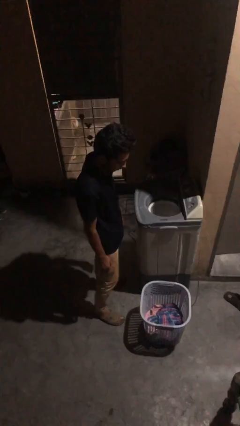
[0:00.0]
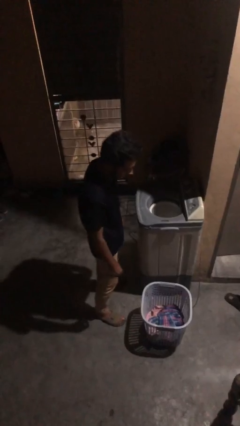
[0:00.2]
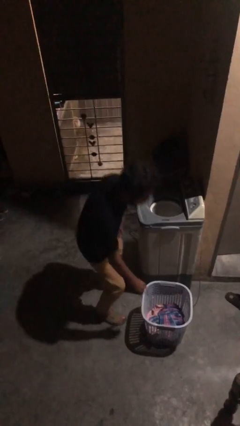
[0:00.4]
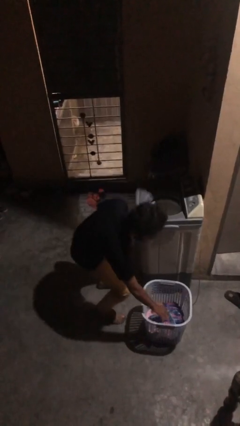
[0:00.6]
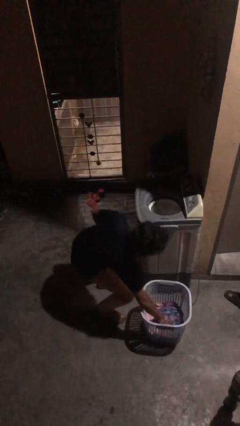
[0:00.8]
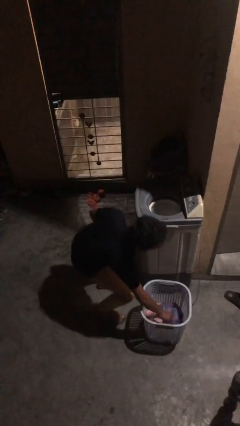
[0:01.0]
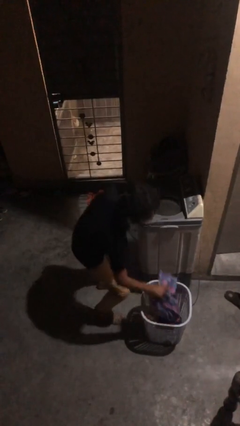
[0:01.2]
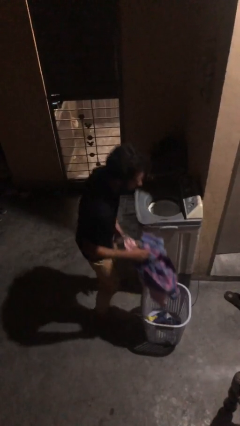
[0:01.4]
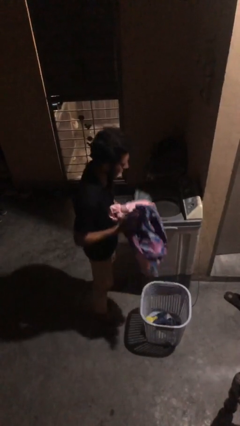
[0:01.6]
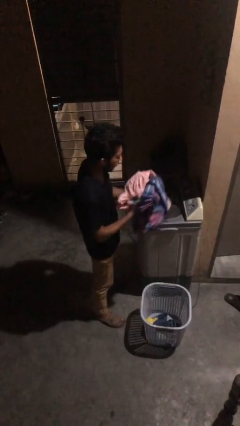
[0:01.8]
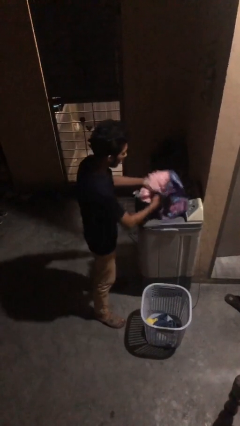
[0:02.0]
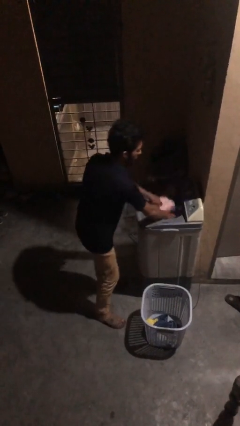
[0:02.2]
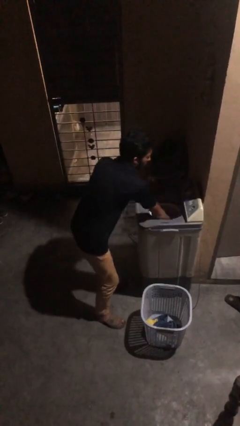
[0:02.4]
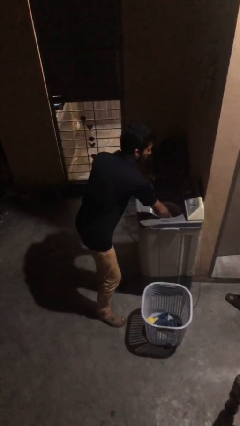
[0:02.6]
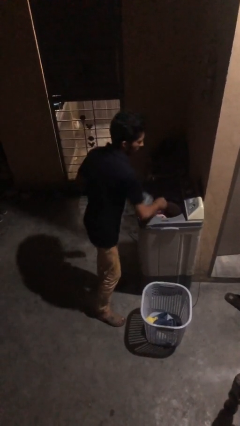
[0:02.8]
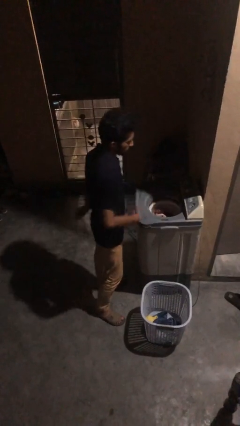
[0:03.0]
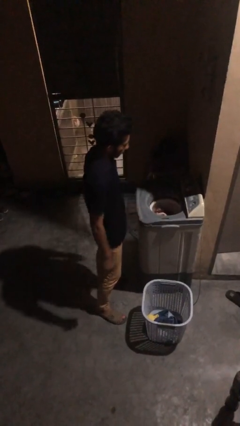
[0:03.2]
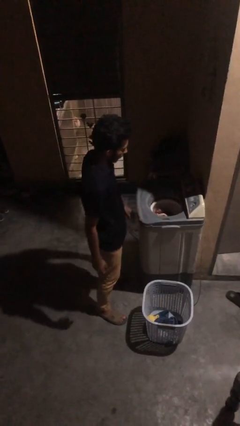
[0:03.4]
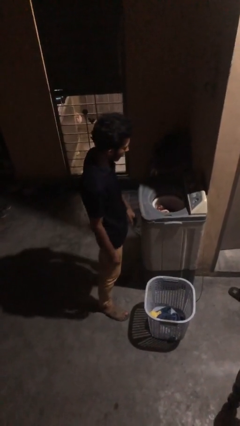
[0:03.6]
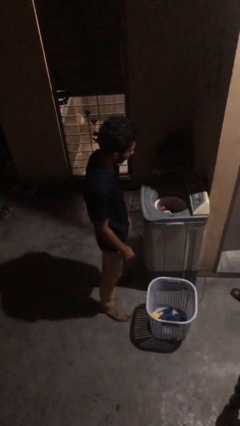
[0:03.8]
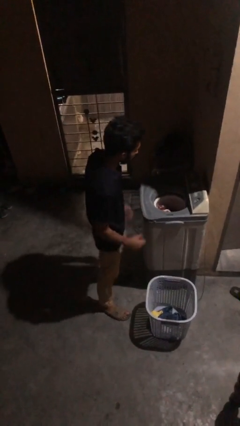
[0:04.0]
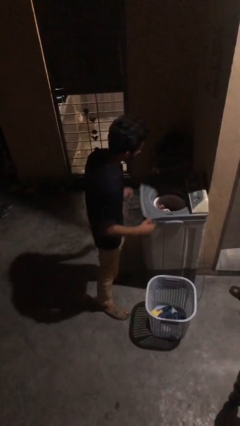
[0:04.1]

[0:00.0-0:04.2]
person loads dryer

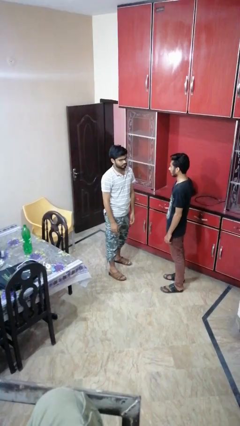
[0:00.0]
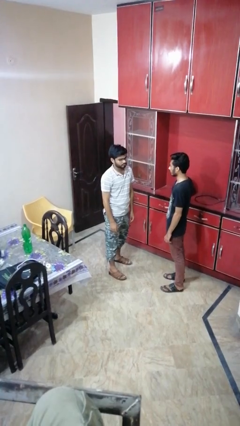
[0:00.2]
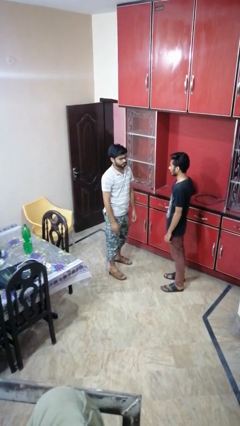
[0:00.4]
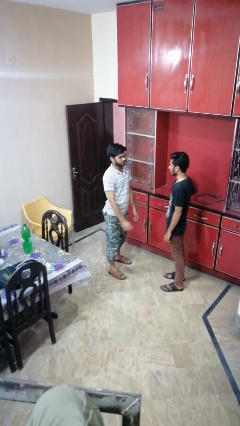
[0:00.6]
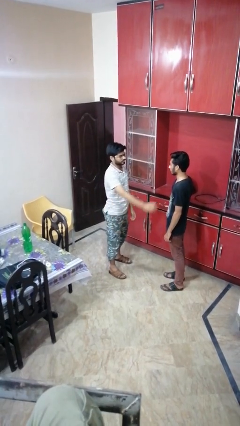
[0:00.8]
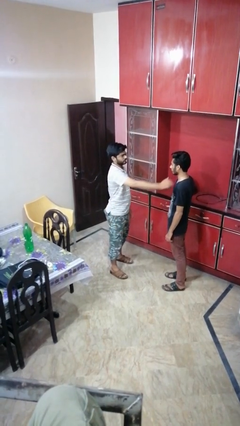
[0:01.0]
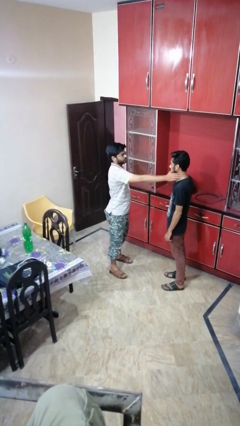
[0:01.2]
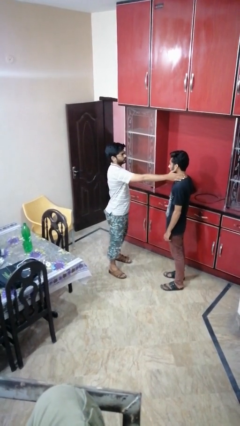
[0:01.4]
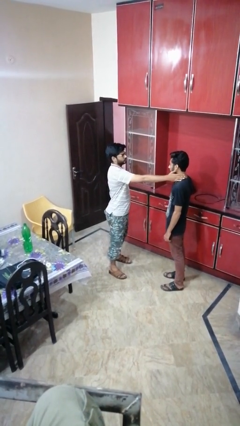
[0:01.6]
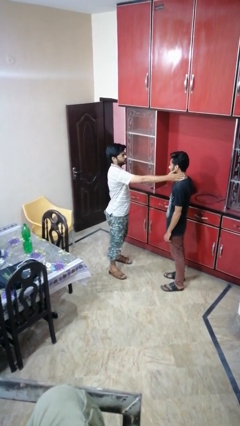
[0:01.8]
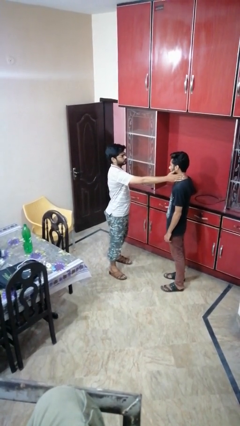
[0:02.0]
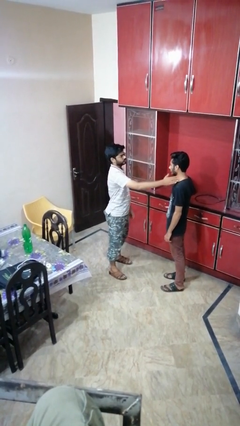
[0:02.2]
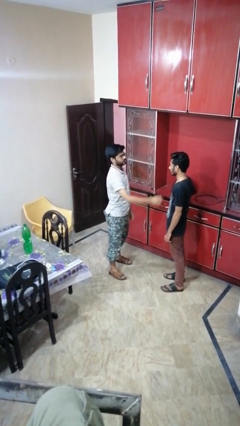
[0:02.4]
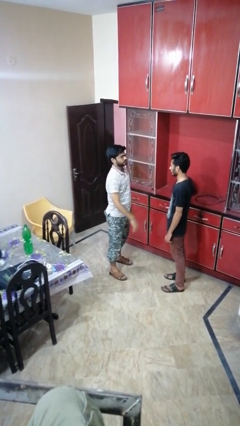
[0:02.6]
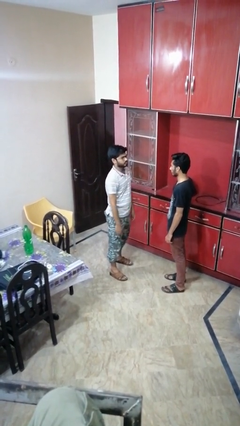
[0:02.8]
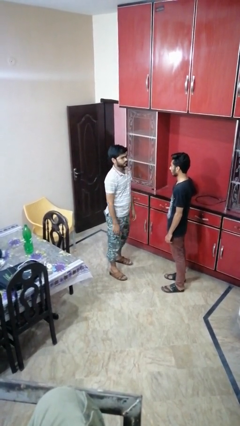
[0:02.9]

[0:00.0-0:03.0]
person touches face of person

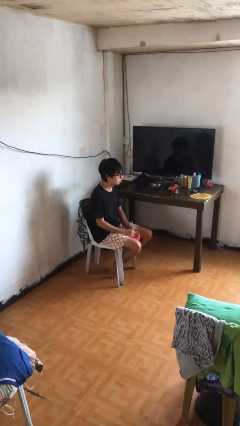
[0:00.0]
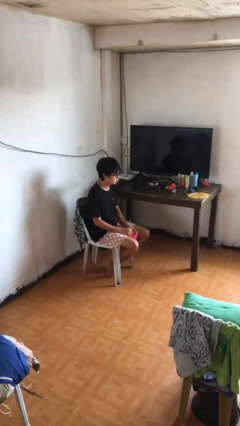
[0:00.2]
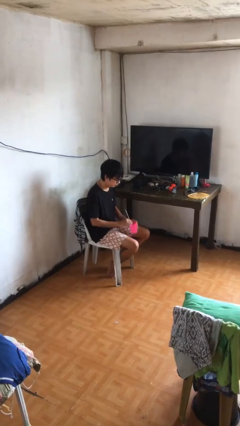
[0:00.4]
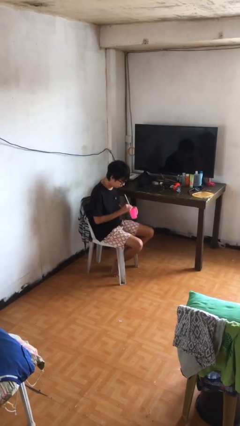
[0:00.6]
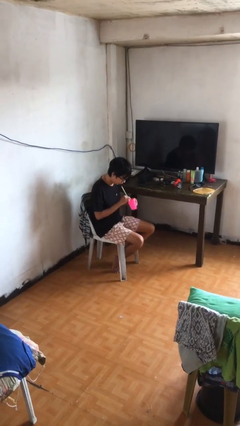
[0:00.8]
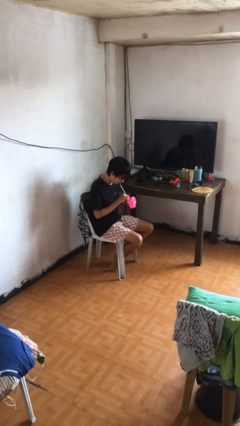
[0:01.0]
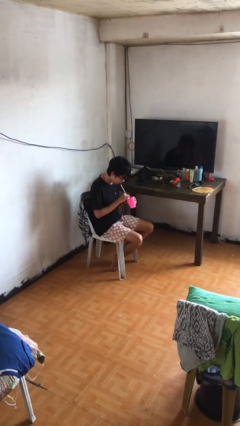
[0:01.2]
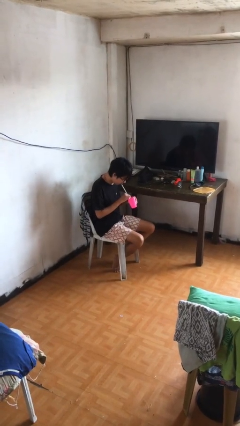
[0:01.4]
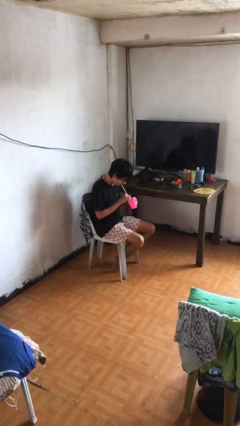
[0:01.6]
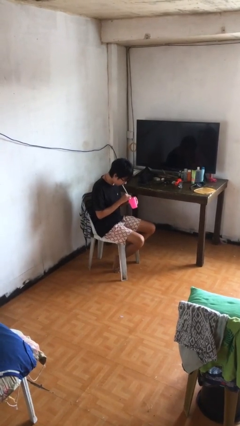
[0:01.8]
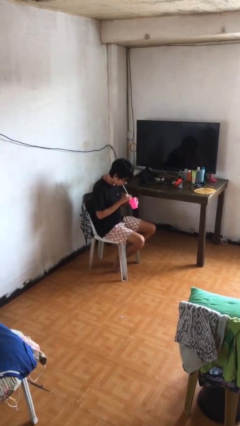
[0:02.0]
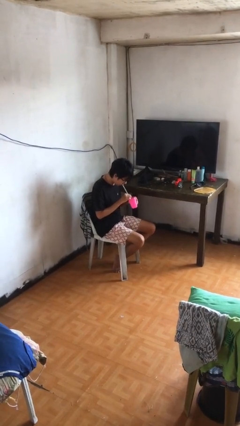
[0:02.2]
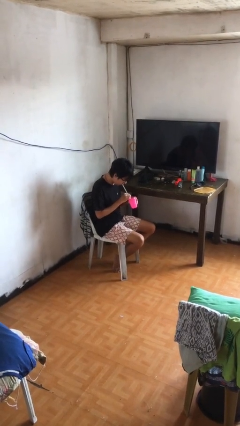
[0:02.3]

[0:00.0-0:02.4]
person drinks from straw

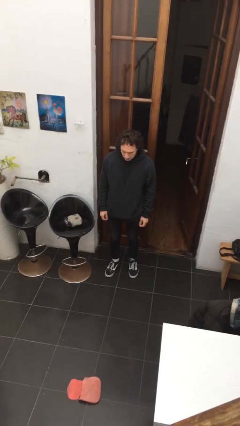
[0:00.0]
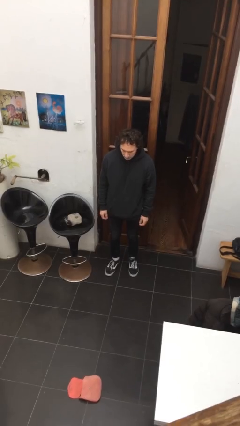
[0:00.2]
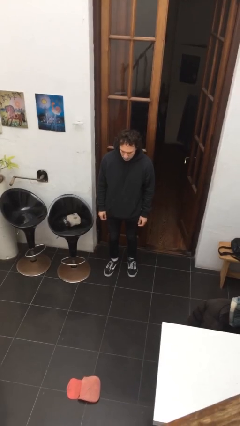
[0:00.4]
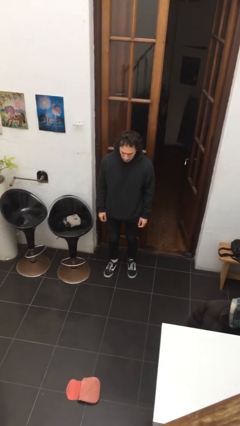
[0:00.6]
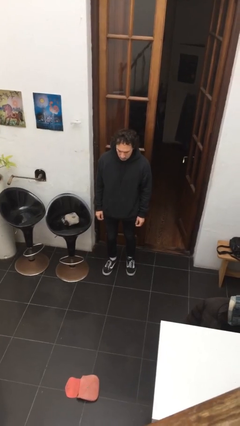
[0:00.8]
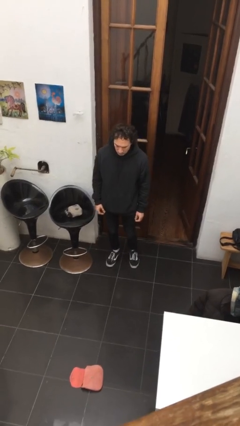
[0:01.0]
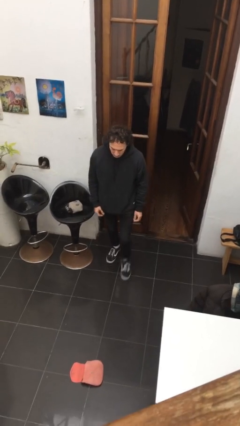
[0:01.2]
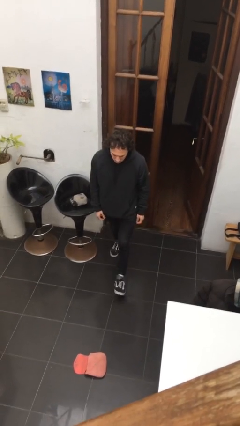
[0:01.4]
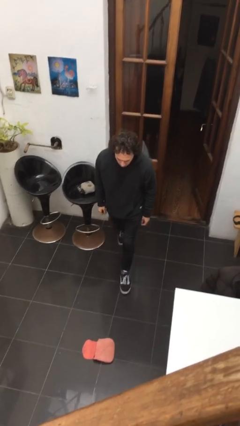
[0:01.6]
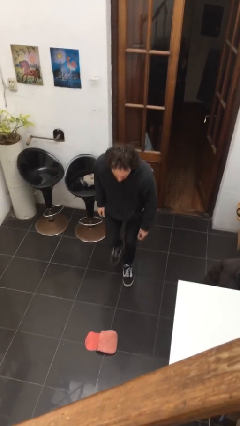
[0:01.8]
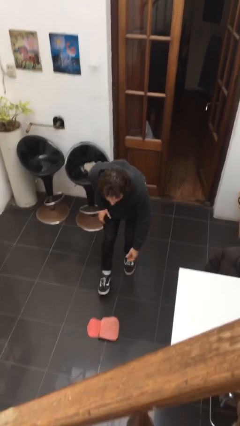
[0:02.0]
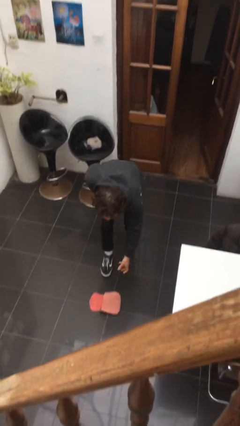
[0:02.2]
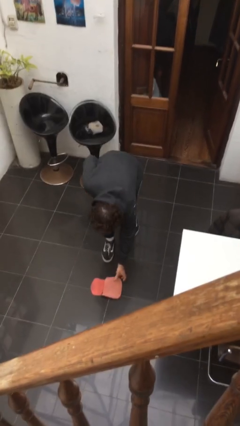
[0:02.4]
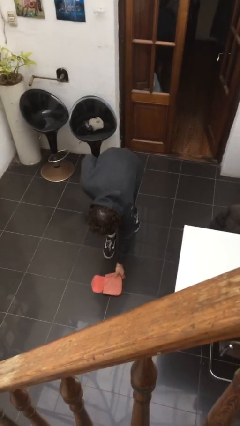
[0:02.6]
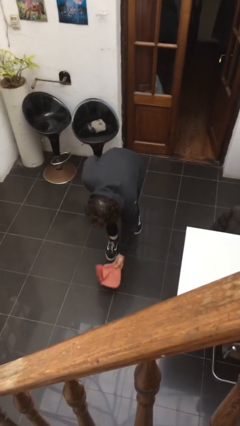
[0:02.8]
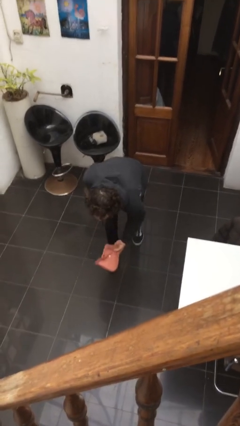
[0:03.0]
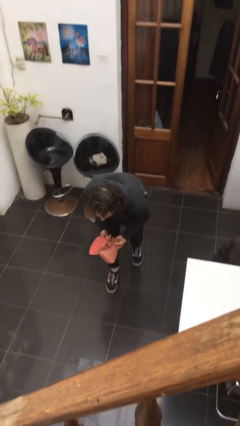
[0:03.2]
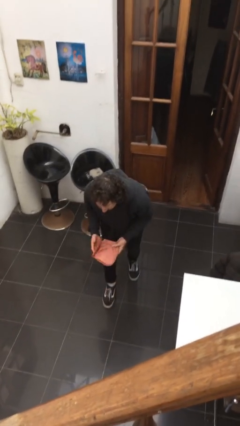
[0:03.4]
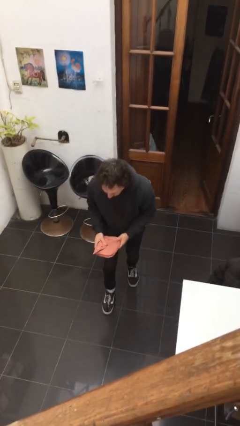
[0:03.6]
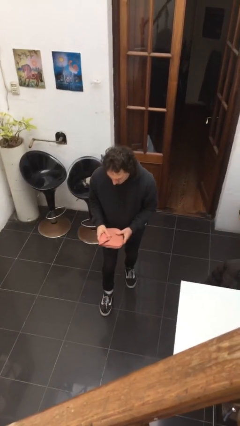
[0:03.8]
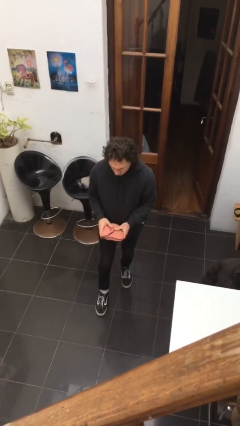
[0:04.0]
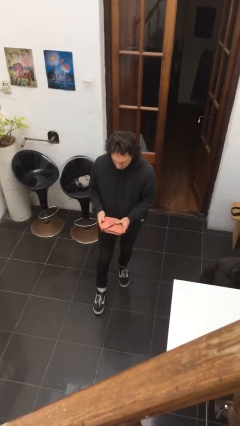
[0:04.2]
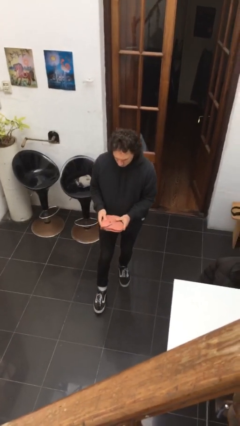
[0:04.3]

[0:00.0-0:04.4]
person picks up object from floor

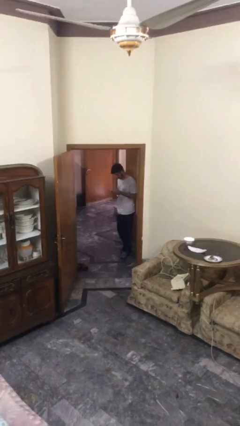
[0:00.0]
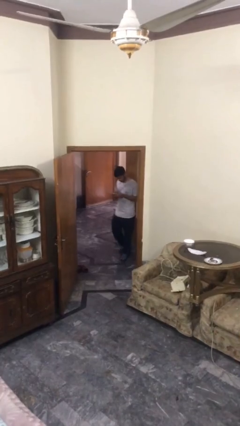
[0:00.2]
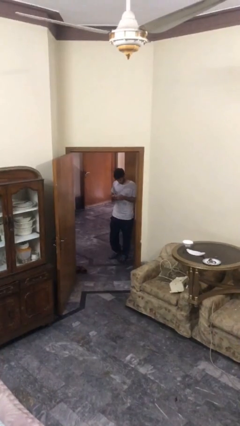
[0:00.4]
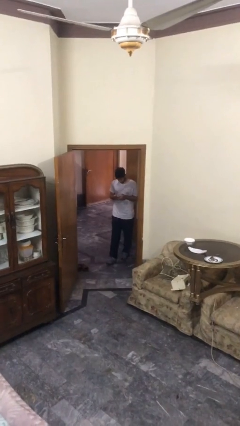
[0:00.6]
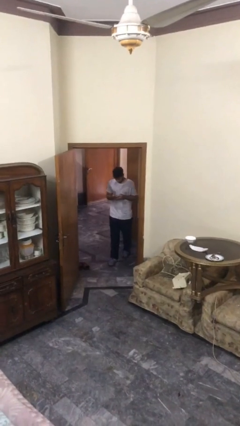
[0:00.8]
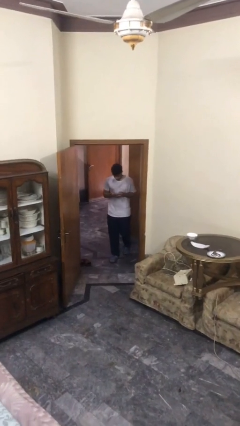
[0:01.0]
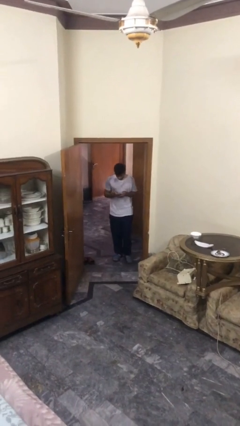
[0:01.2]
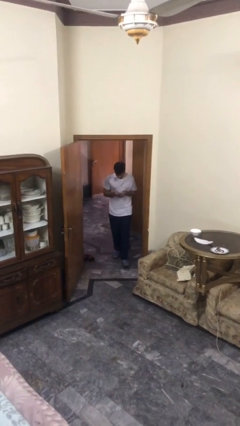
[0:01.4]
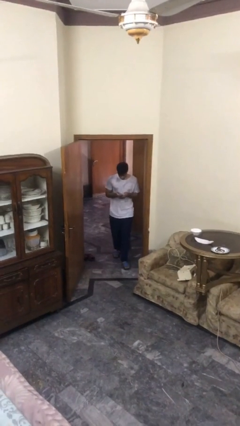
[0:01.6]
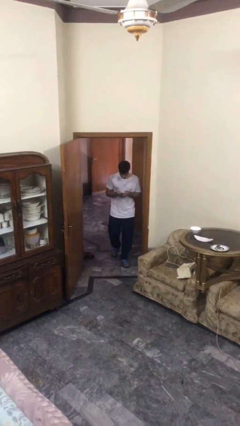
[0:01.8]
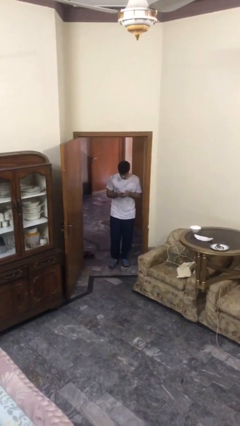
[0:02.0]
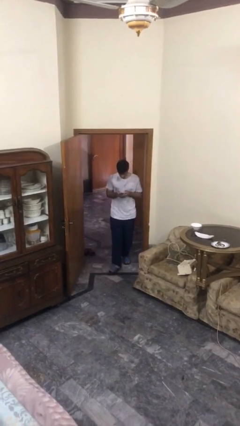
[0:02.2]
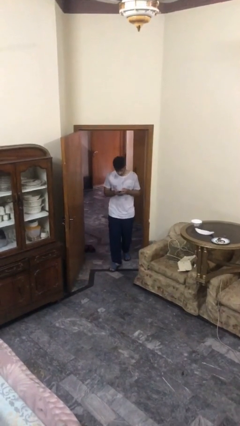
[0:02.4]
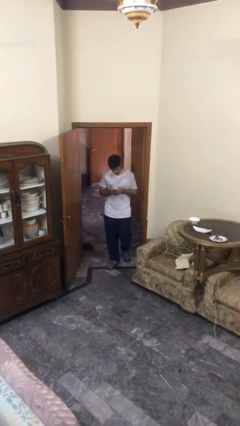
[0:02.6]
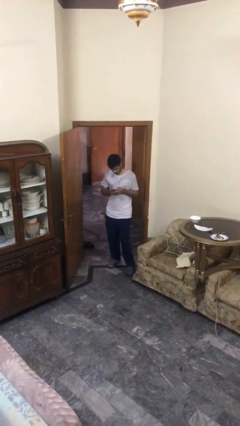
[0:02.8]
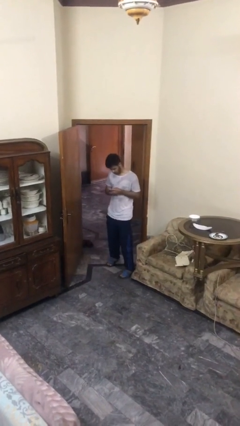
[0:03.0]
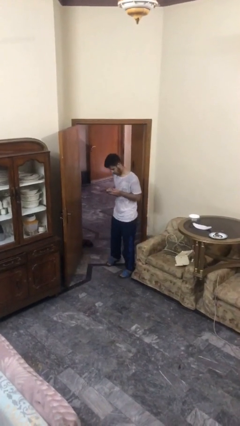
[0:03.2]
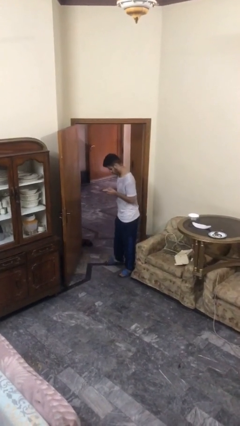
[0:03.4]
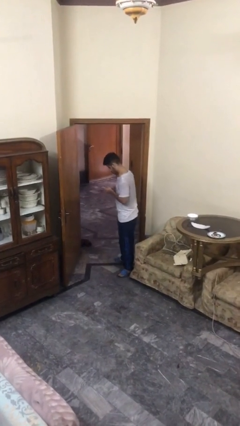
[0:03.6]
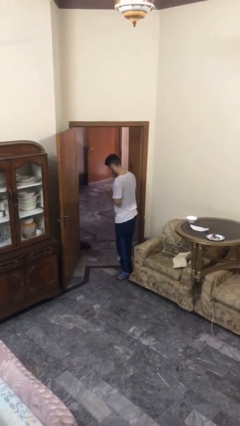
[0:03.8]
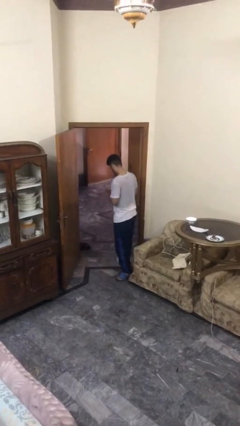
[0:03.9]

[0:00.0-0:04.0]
person enters scene through structure
